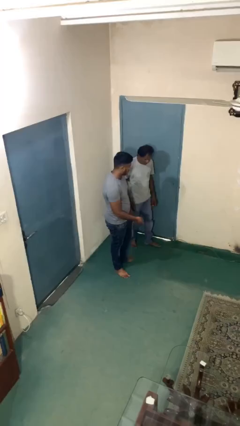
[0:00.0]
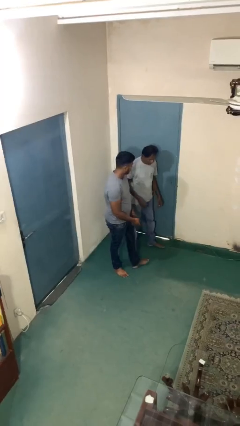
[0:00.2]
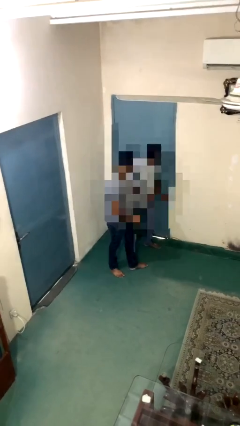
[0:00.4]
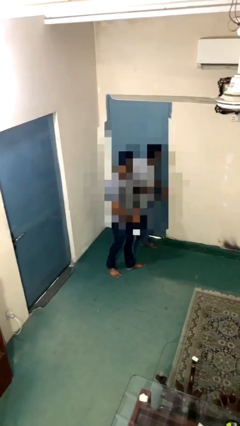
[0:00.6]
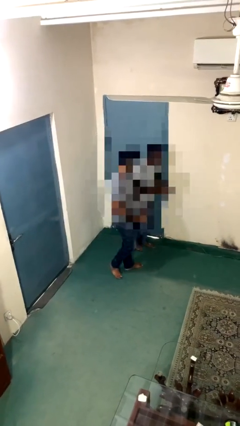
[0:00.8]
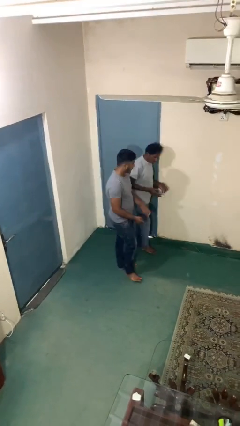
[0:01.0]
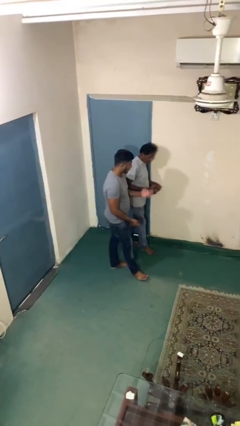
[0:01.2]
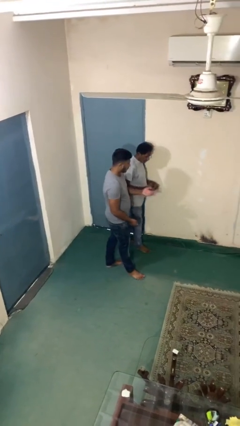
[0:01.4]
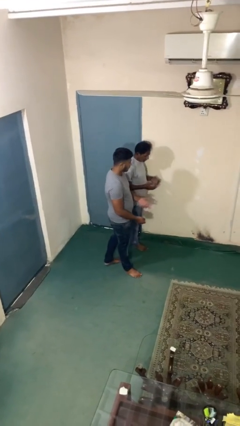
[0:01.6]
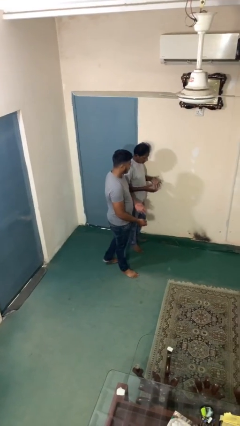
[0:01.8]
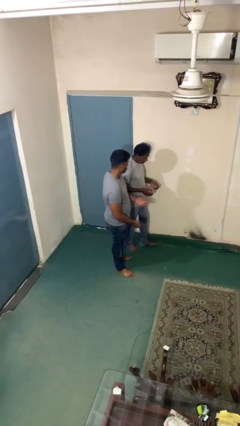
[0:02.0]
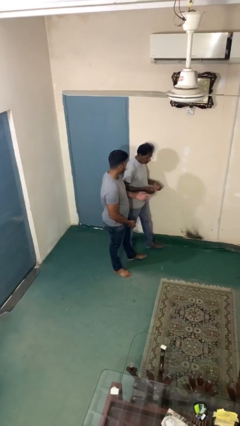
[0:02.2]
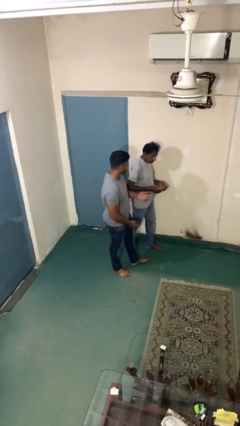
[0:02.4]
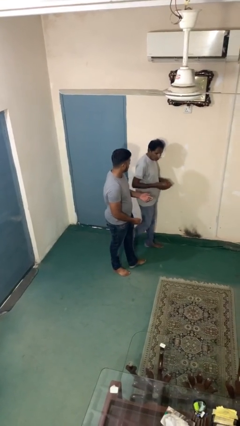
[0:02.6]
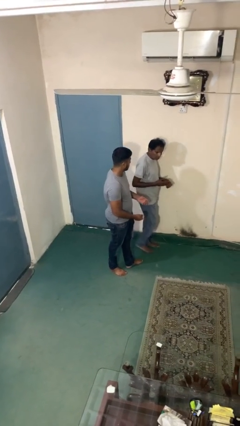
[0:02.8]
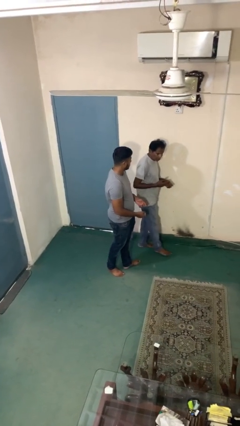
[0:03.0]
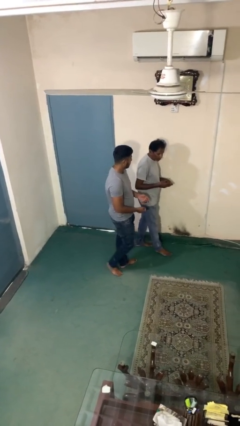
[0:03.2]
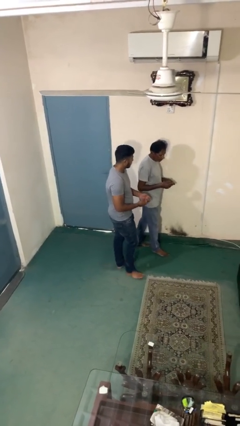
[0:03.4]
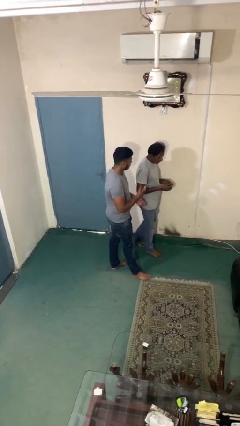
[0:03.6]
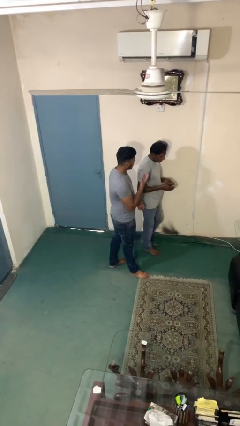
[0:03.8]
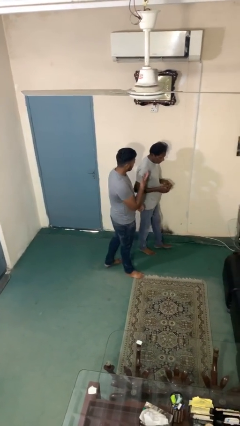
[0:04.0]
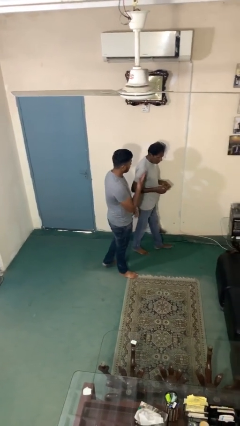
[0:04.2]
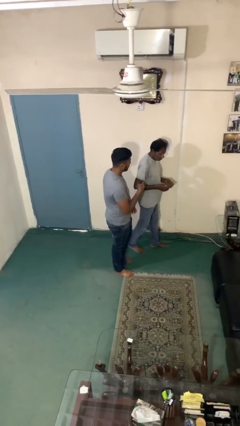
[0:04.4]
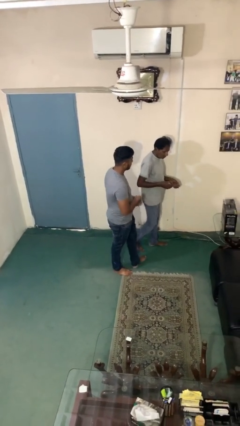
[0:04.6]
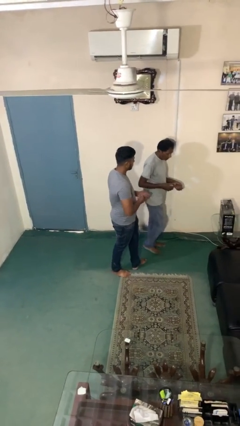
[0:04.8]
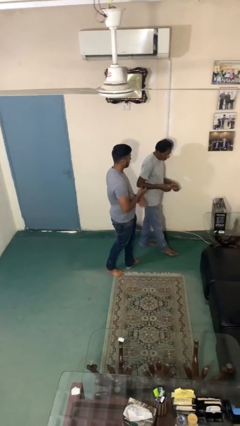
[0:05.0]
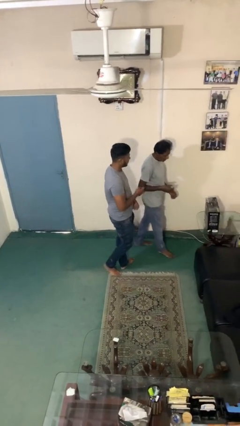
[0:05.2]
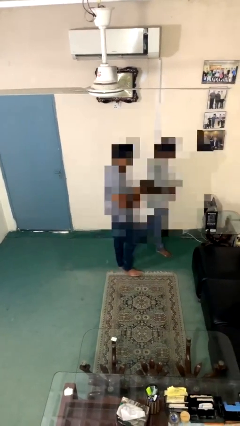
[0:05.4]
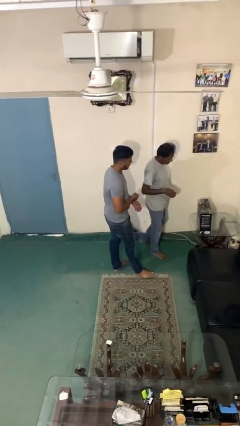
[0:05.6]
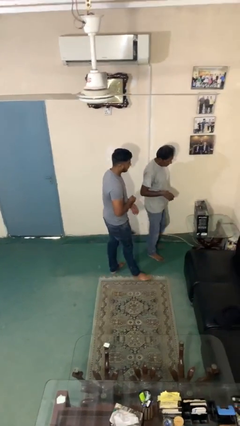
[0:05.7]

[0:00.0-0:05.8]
person talks to person

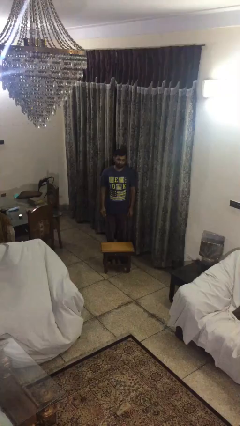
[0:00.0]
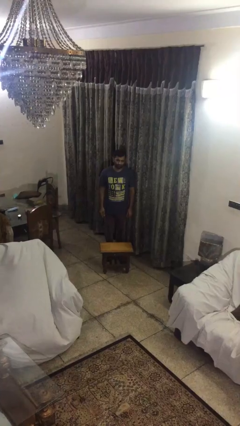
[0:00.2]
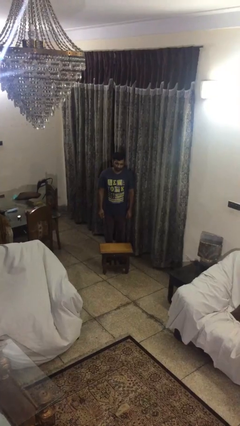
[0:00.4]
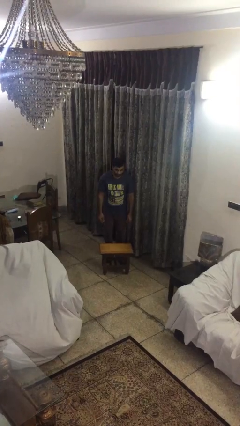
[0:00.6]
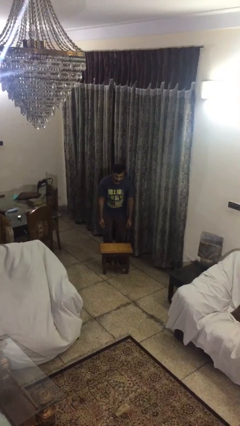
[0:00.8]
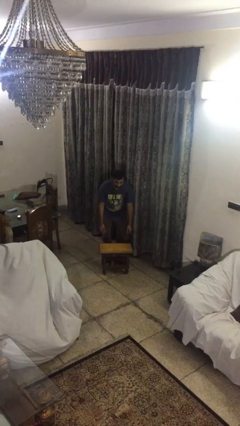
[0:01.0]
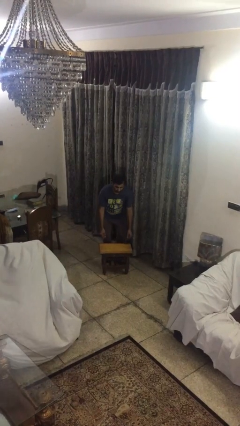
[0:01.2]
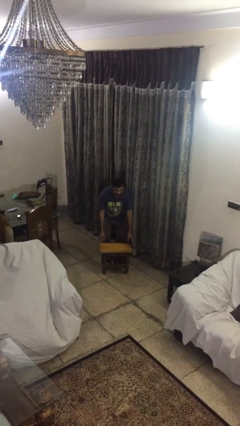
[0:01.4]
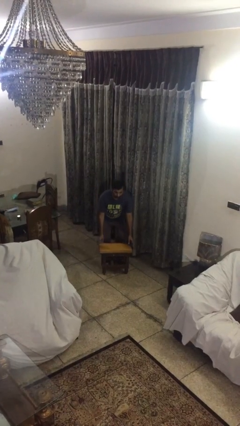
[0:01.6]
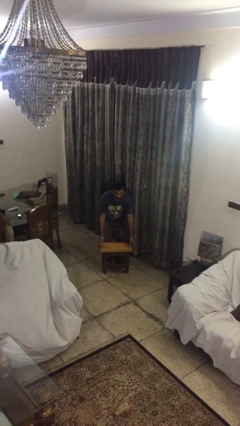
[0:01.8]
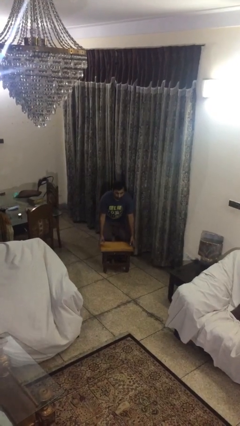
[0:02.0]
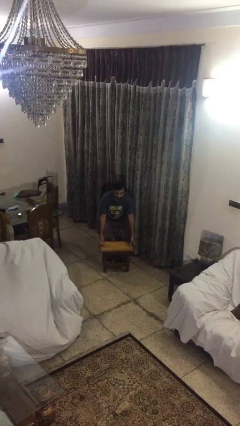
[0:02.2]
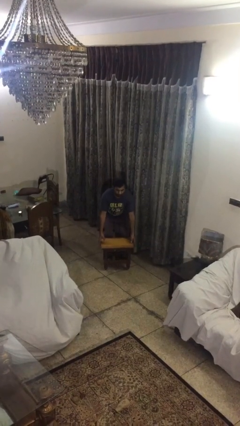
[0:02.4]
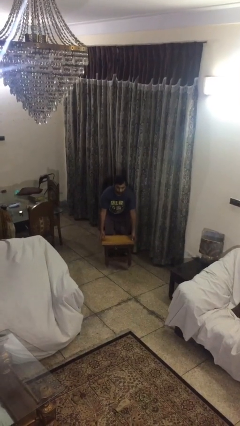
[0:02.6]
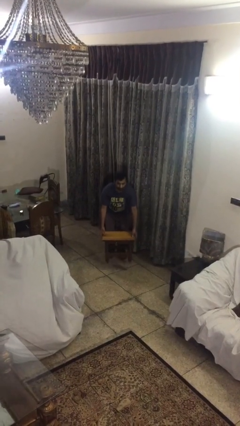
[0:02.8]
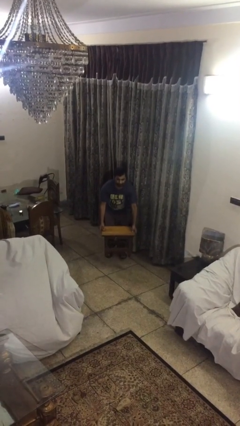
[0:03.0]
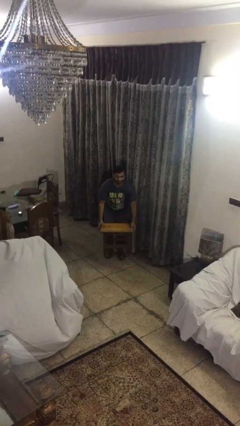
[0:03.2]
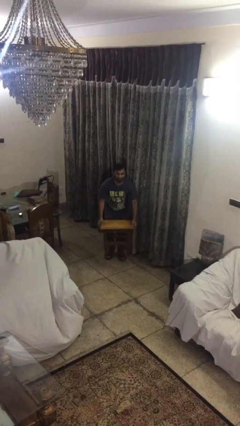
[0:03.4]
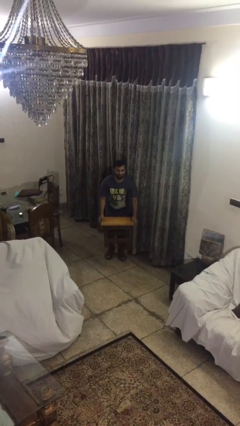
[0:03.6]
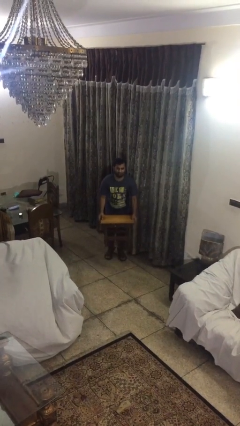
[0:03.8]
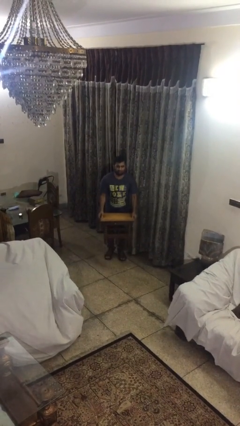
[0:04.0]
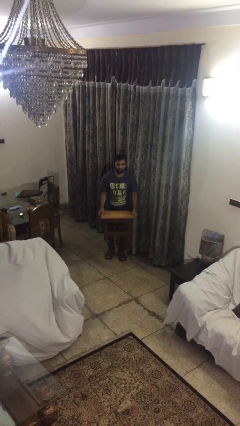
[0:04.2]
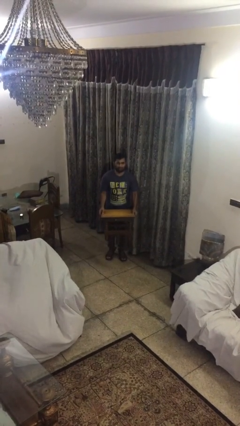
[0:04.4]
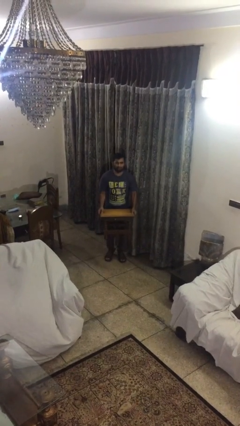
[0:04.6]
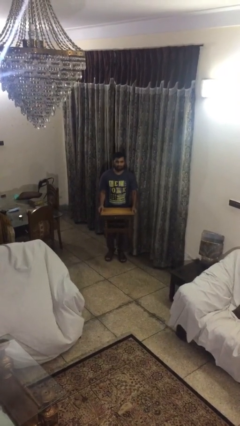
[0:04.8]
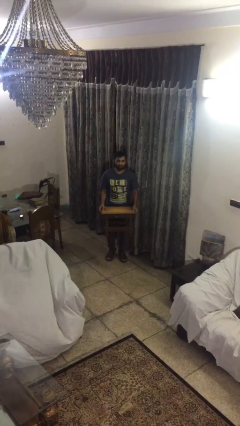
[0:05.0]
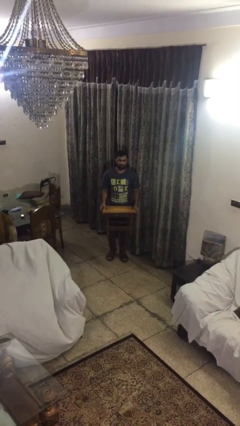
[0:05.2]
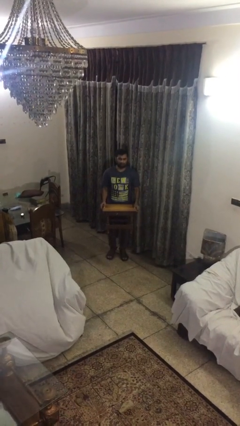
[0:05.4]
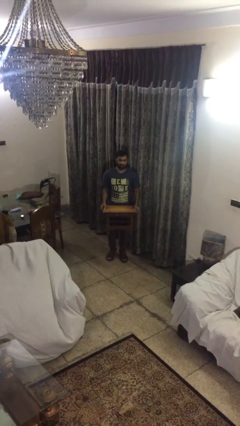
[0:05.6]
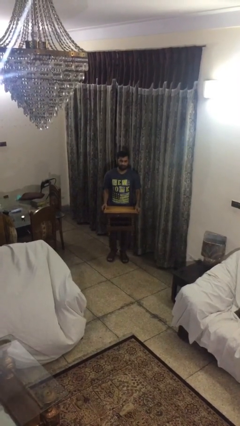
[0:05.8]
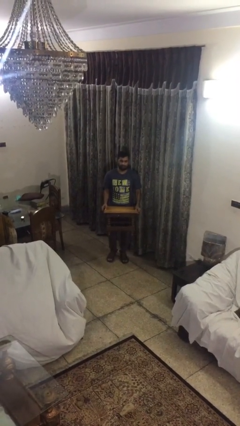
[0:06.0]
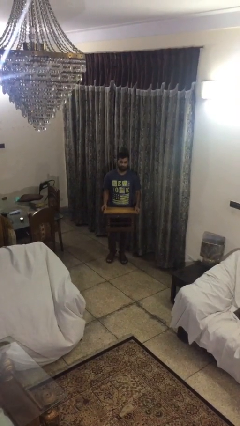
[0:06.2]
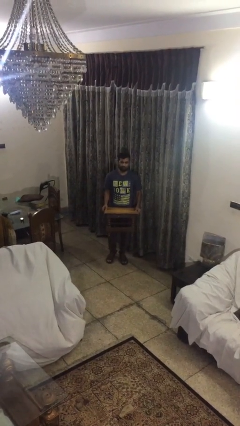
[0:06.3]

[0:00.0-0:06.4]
person picks up object from floor

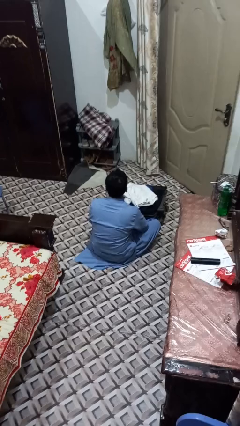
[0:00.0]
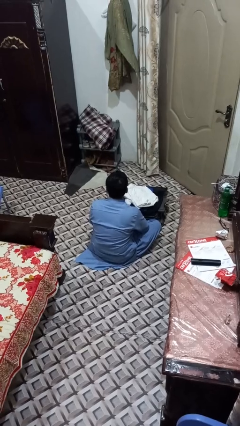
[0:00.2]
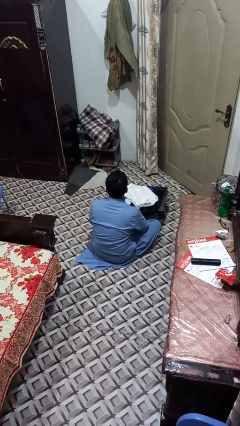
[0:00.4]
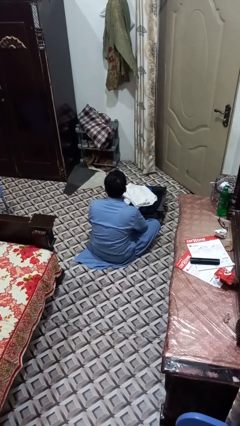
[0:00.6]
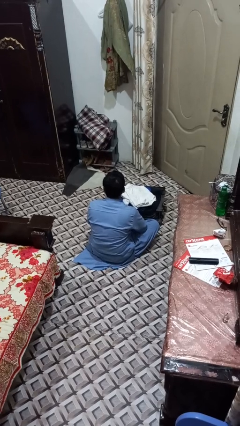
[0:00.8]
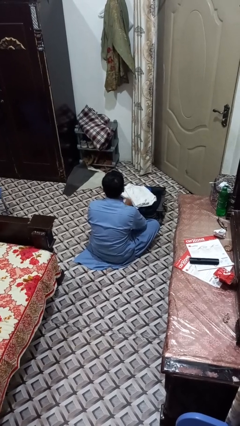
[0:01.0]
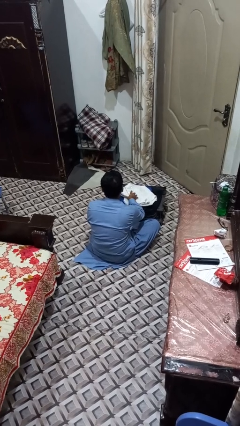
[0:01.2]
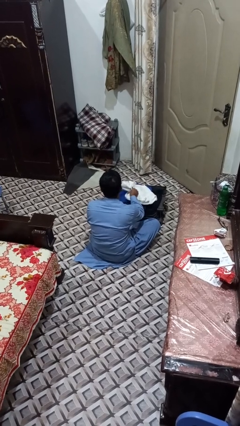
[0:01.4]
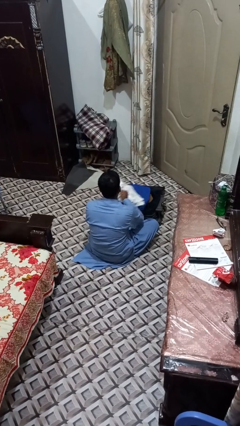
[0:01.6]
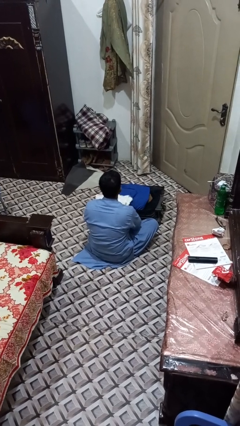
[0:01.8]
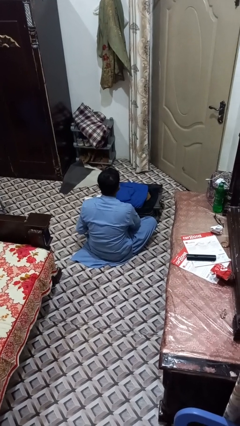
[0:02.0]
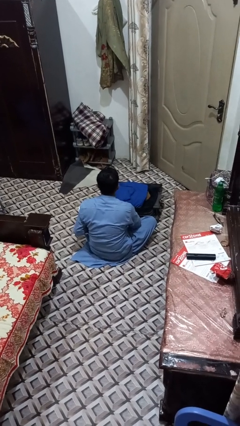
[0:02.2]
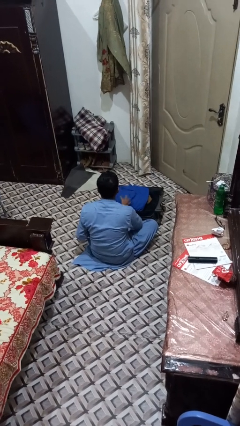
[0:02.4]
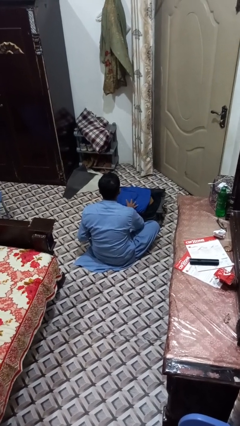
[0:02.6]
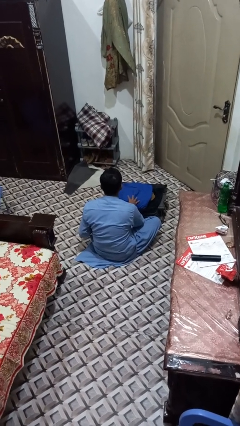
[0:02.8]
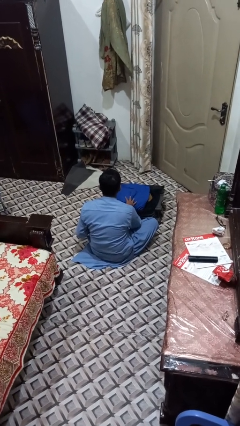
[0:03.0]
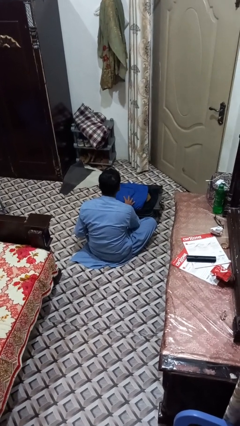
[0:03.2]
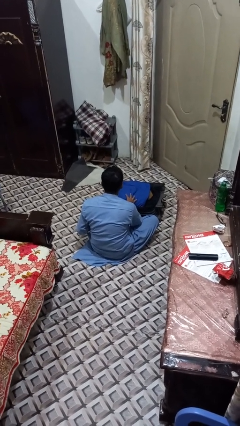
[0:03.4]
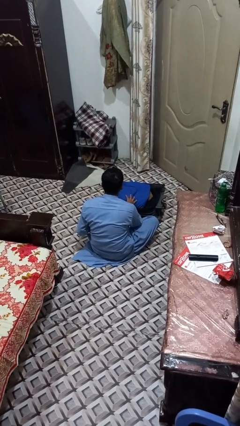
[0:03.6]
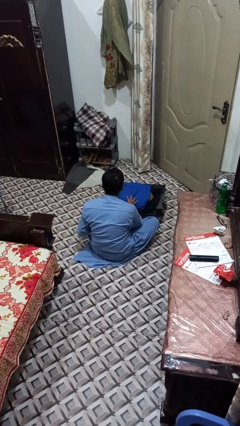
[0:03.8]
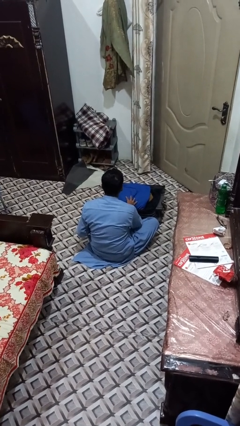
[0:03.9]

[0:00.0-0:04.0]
person unloads clothes from suitcase

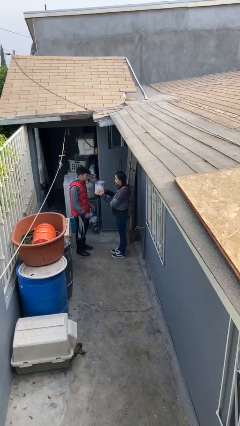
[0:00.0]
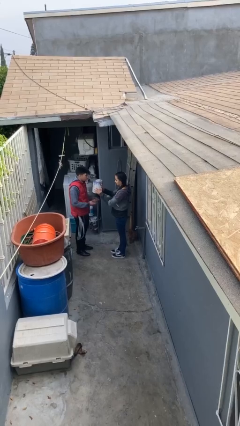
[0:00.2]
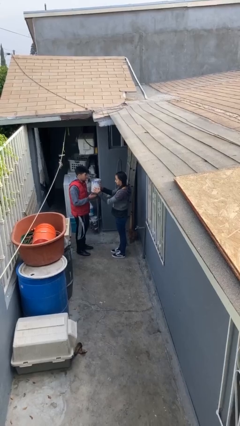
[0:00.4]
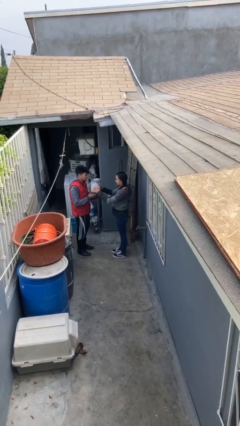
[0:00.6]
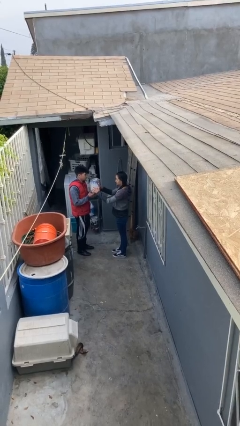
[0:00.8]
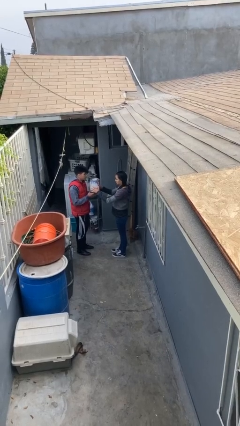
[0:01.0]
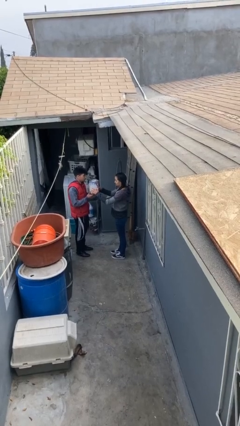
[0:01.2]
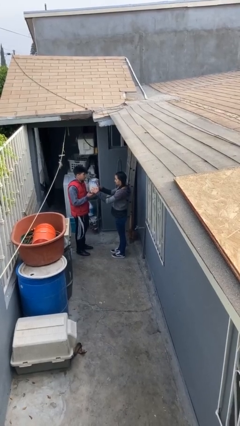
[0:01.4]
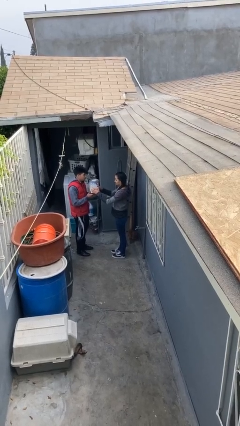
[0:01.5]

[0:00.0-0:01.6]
person transfers object to person

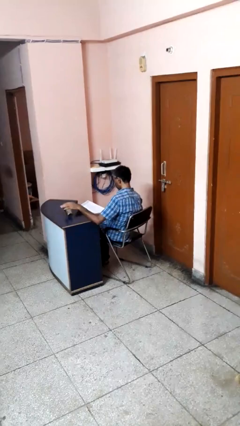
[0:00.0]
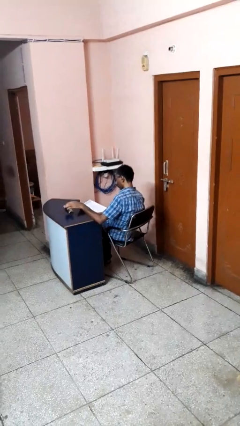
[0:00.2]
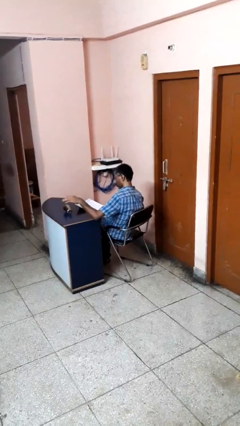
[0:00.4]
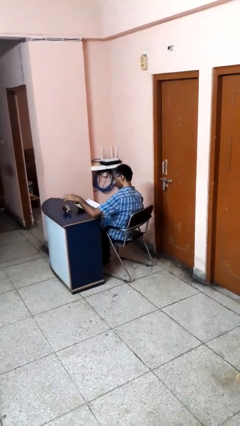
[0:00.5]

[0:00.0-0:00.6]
person knocks over glass
